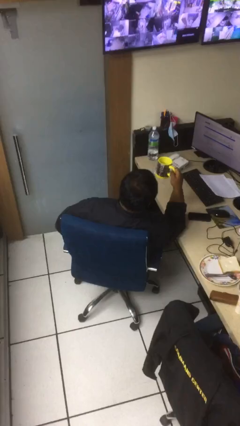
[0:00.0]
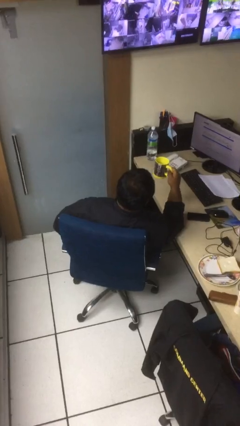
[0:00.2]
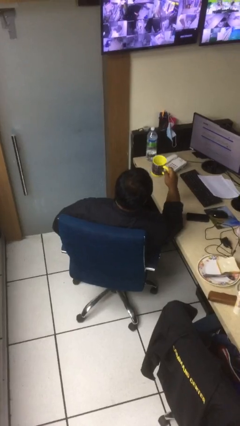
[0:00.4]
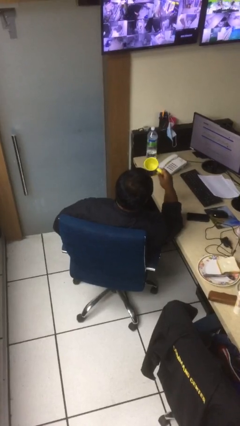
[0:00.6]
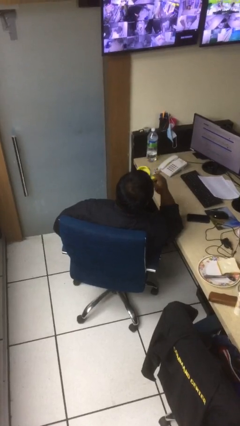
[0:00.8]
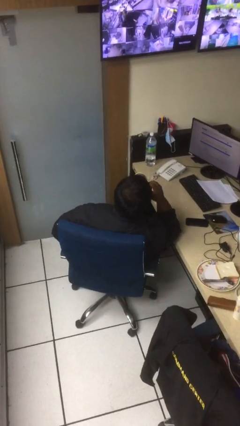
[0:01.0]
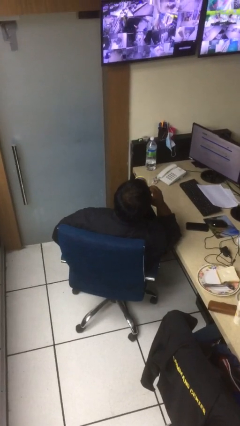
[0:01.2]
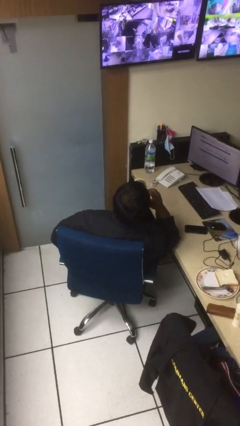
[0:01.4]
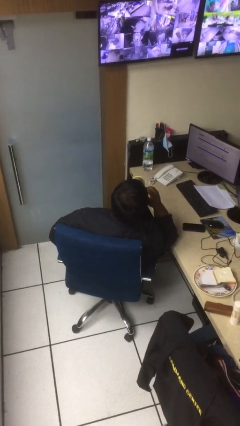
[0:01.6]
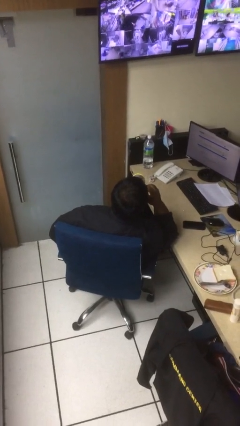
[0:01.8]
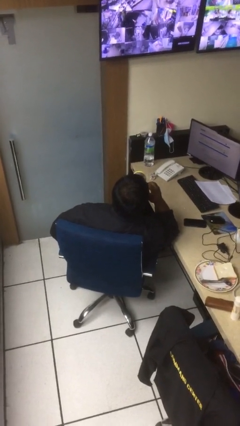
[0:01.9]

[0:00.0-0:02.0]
person drinks from mug

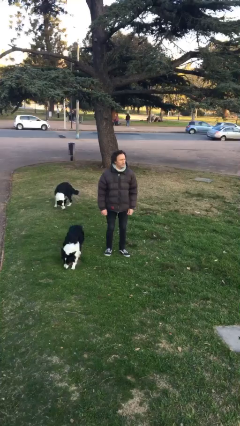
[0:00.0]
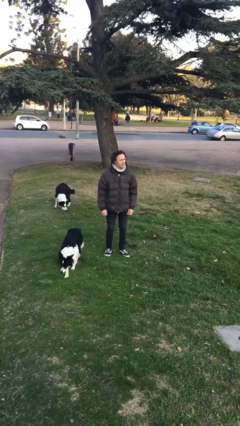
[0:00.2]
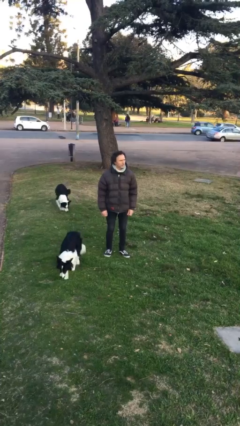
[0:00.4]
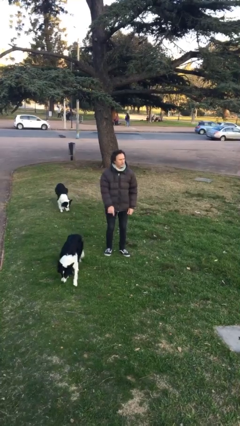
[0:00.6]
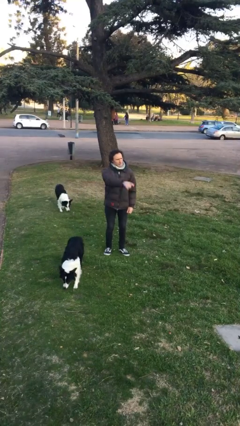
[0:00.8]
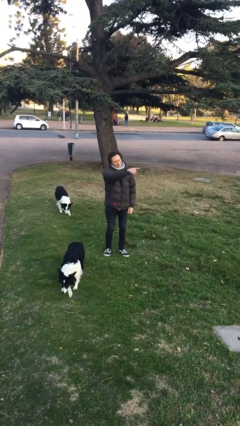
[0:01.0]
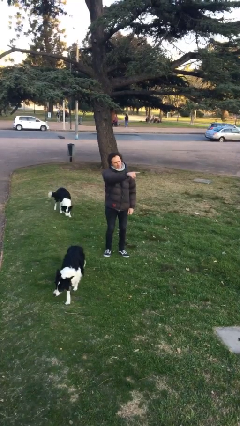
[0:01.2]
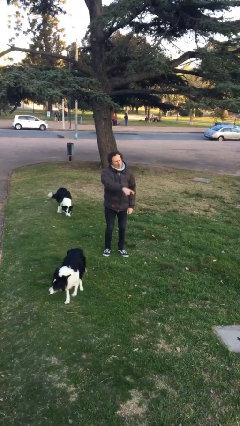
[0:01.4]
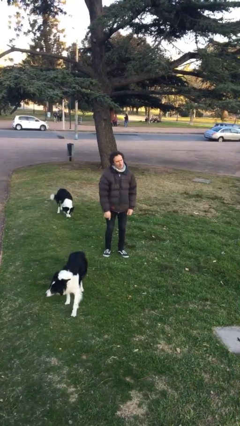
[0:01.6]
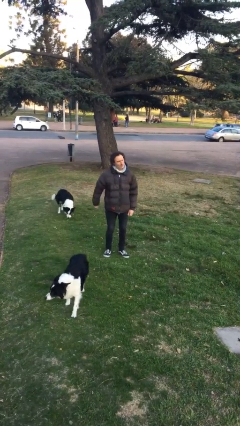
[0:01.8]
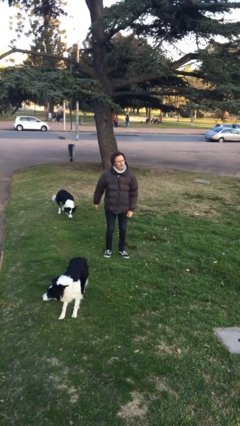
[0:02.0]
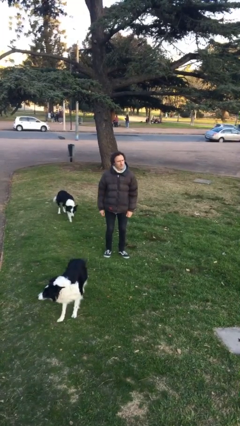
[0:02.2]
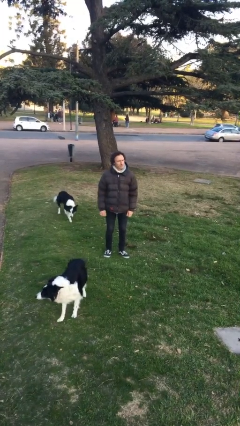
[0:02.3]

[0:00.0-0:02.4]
person points at person

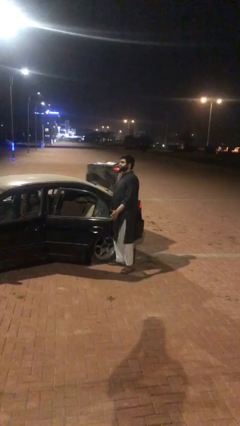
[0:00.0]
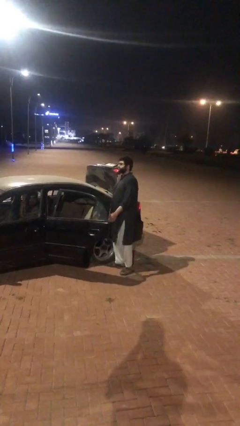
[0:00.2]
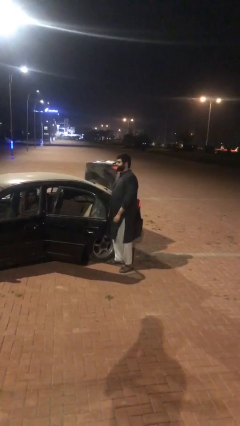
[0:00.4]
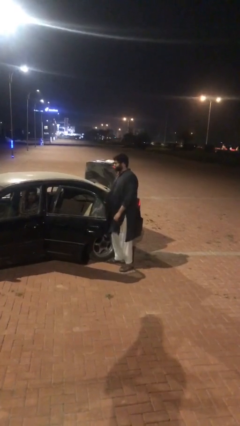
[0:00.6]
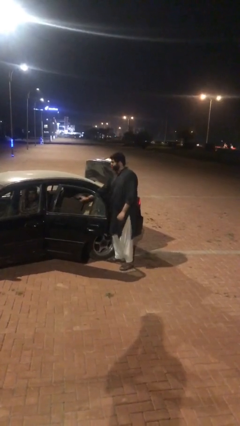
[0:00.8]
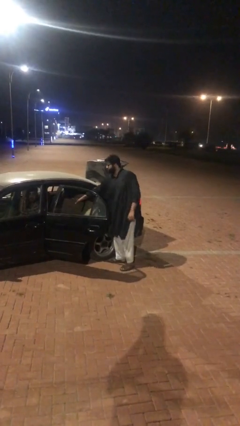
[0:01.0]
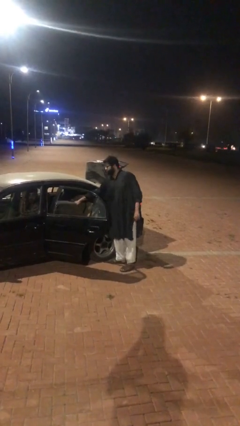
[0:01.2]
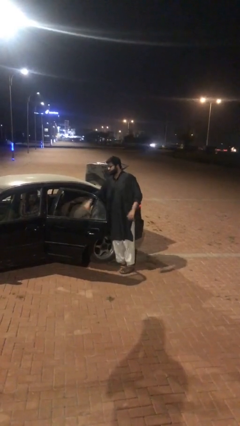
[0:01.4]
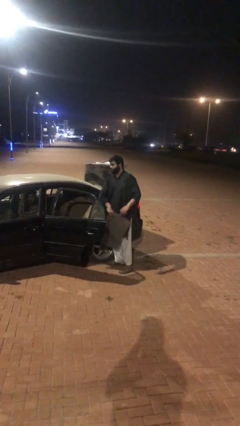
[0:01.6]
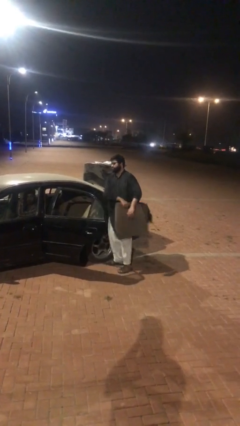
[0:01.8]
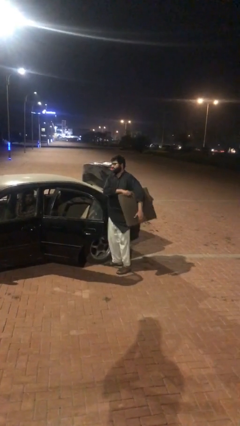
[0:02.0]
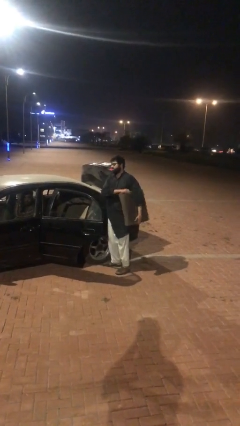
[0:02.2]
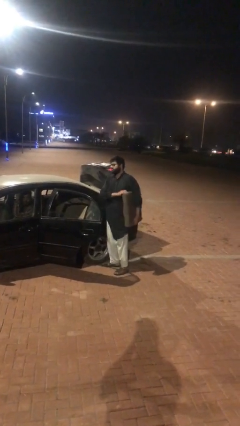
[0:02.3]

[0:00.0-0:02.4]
person unloads car

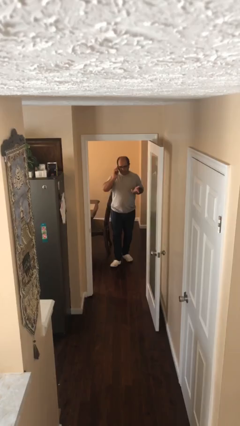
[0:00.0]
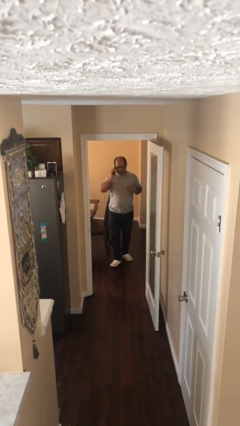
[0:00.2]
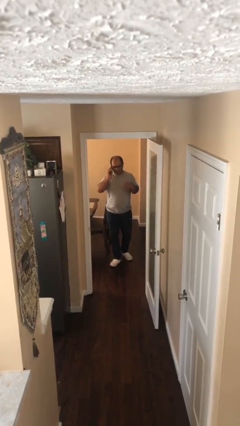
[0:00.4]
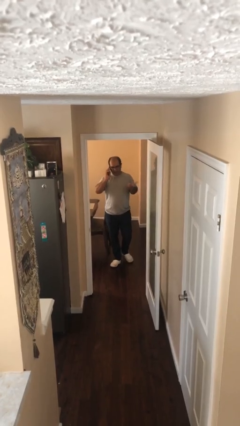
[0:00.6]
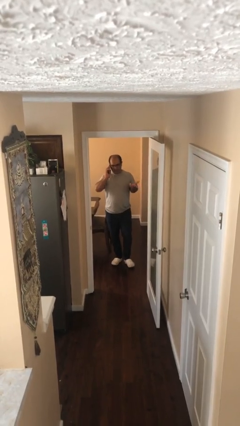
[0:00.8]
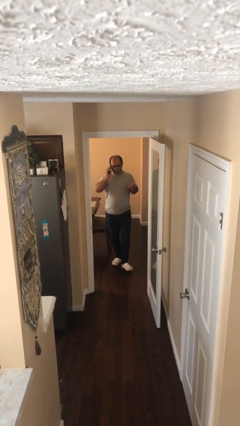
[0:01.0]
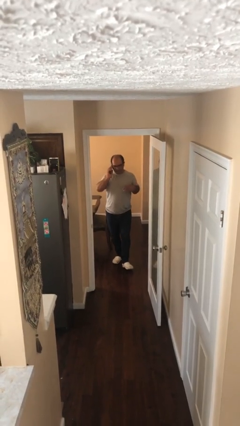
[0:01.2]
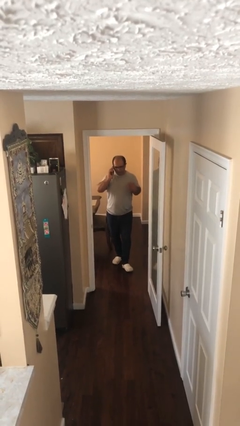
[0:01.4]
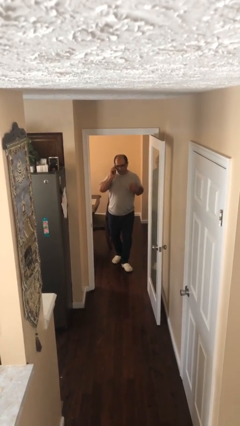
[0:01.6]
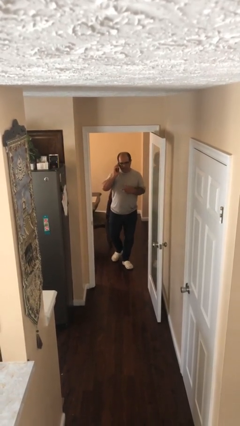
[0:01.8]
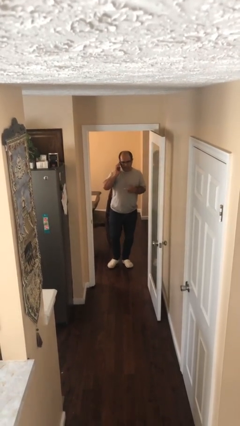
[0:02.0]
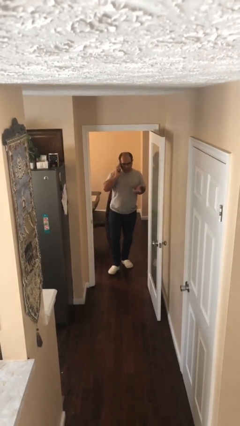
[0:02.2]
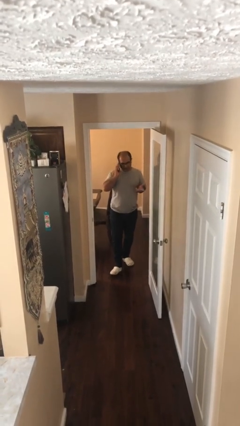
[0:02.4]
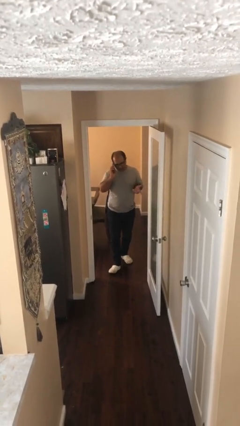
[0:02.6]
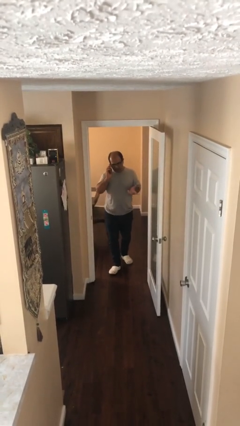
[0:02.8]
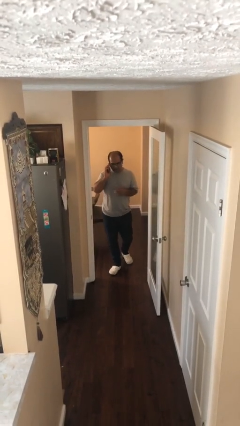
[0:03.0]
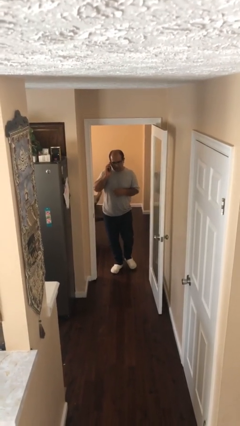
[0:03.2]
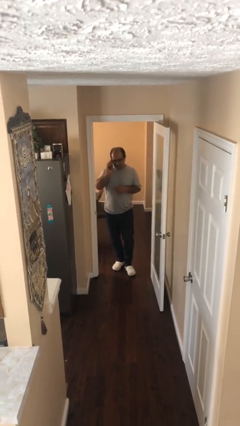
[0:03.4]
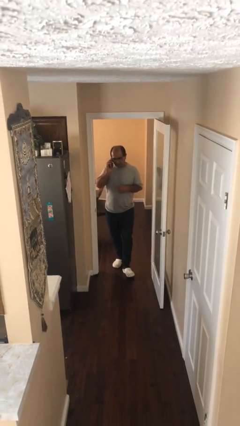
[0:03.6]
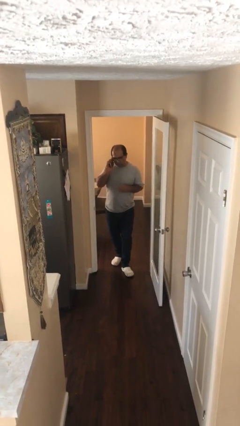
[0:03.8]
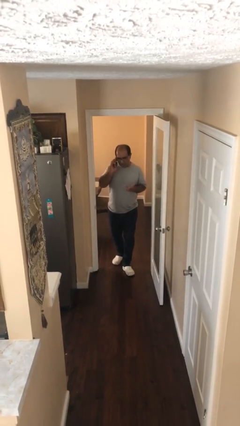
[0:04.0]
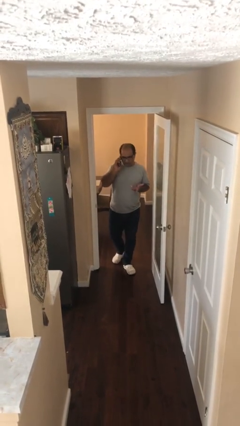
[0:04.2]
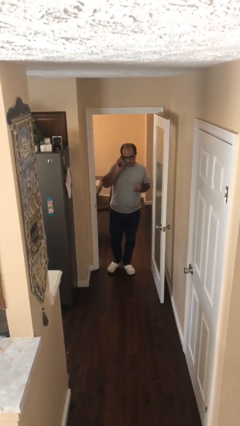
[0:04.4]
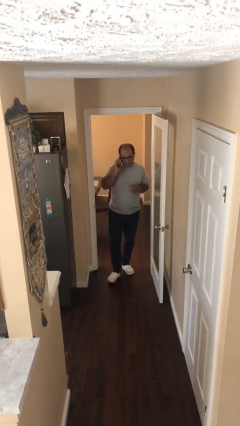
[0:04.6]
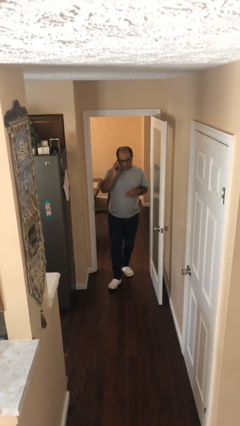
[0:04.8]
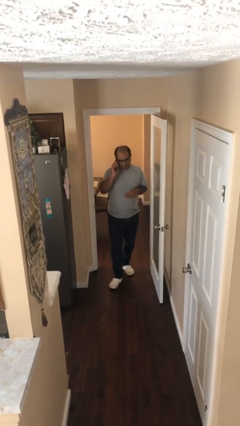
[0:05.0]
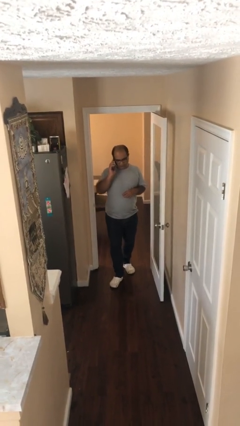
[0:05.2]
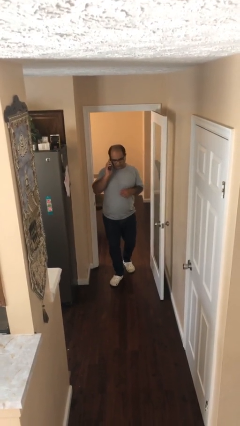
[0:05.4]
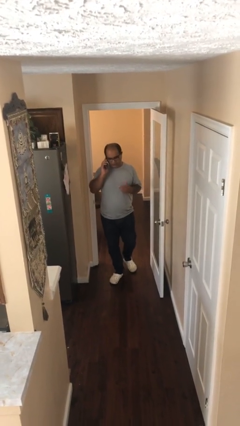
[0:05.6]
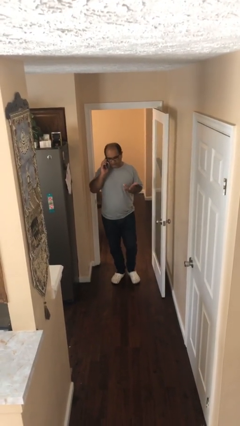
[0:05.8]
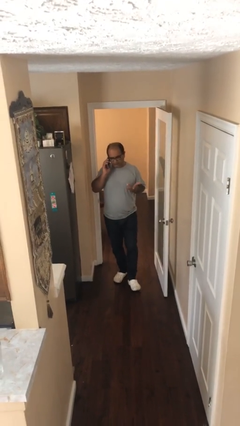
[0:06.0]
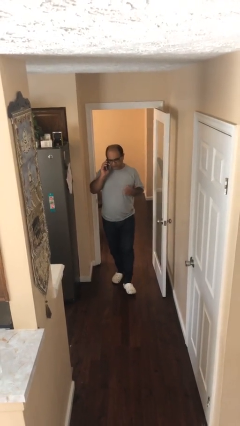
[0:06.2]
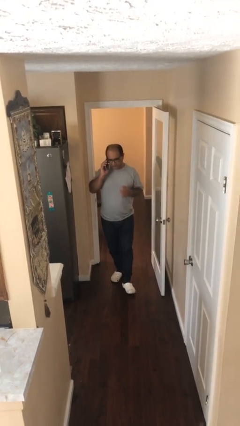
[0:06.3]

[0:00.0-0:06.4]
person enters scene through structure

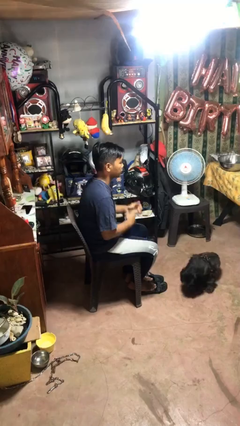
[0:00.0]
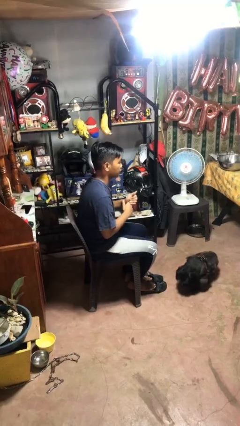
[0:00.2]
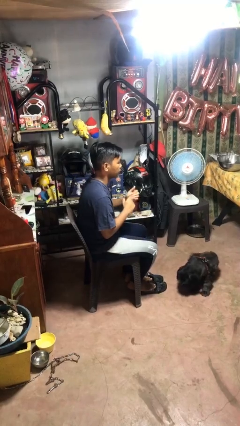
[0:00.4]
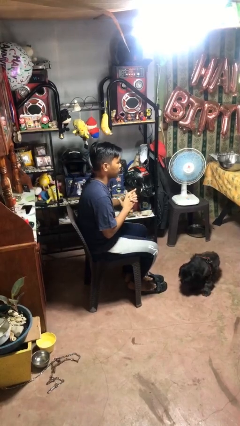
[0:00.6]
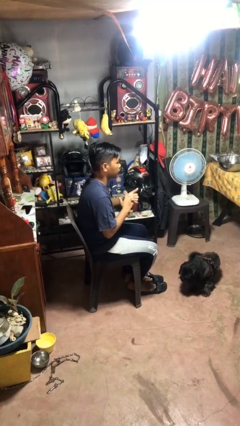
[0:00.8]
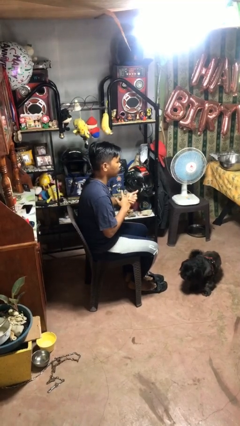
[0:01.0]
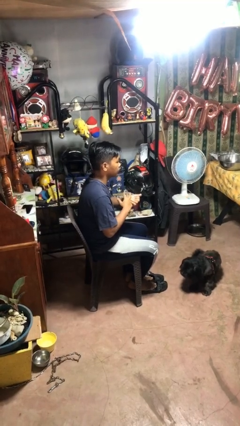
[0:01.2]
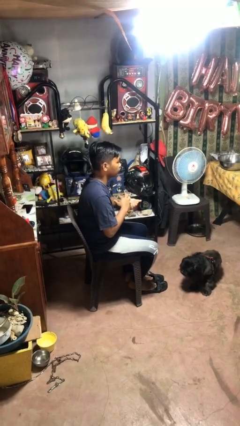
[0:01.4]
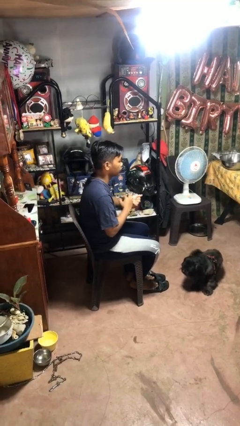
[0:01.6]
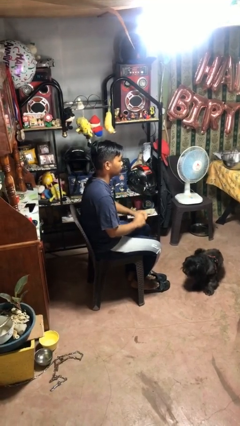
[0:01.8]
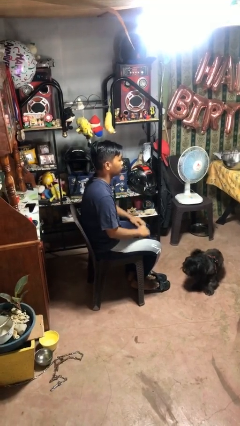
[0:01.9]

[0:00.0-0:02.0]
person cracks knuckles

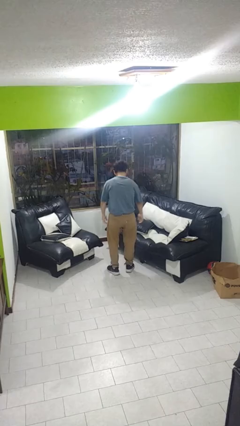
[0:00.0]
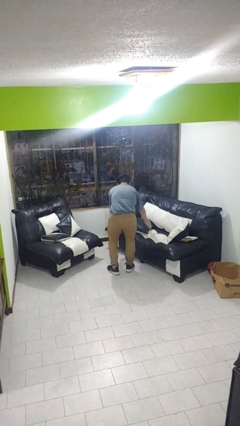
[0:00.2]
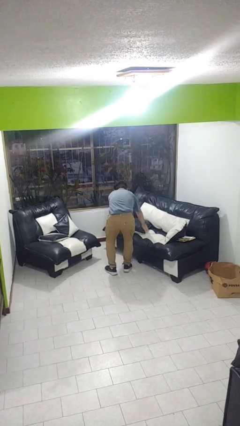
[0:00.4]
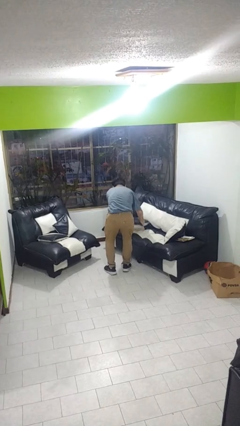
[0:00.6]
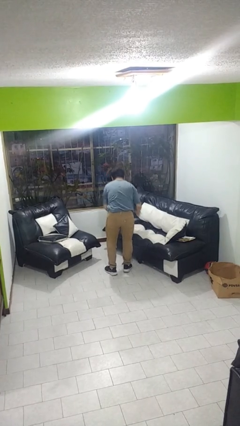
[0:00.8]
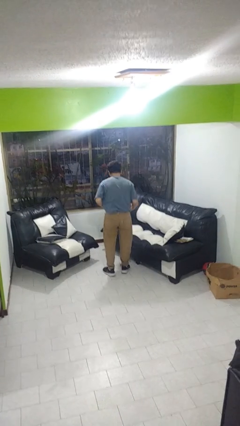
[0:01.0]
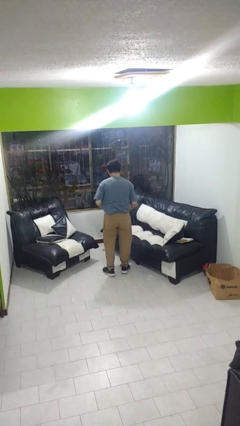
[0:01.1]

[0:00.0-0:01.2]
person picks up object from couch

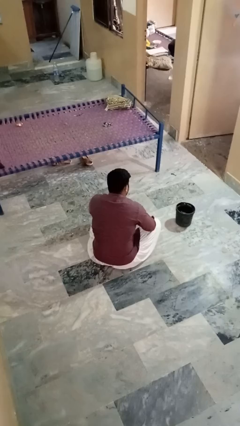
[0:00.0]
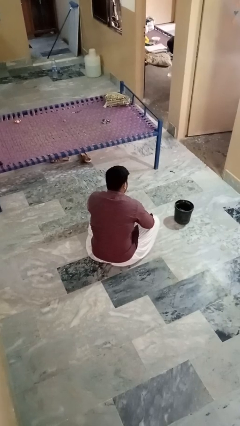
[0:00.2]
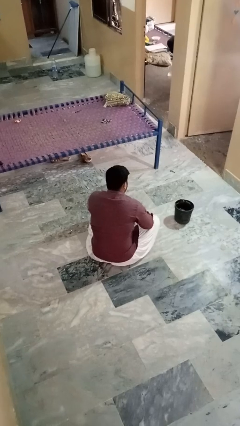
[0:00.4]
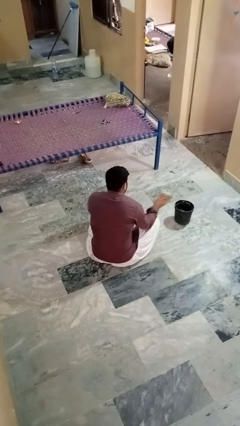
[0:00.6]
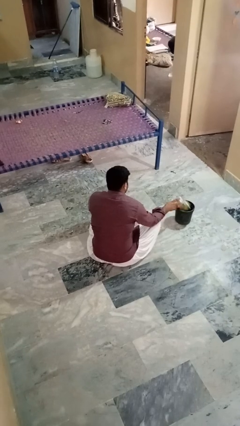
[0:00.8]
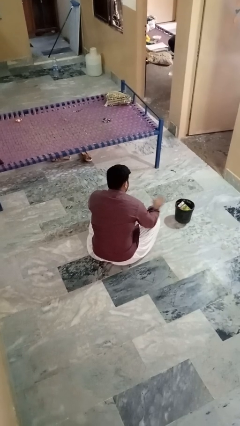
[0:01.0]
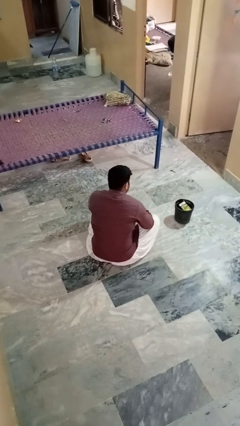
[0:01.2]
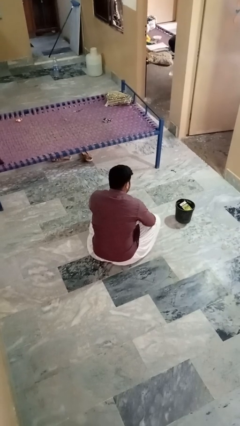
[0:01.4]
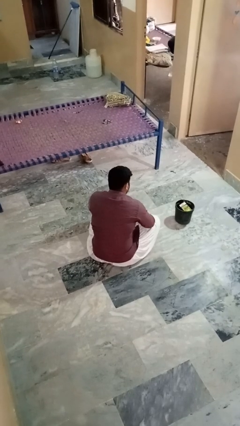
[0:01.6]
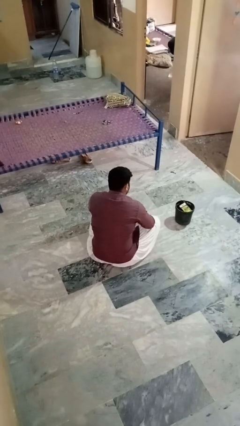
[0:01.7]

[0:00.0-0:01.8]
person puts object into basket
